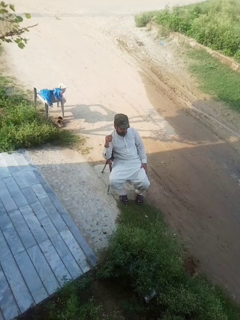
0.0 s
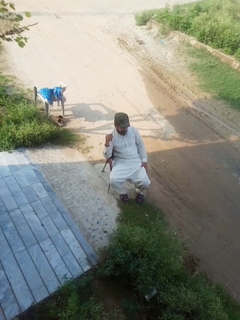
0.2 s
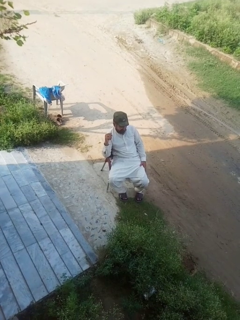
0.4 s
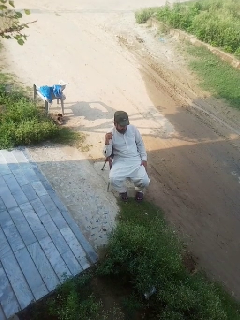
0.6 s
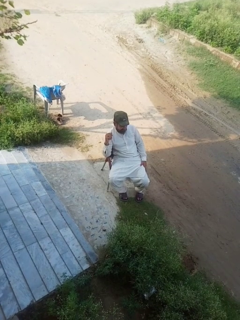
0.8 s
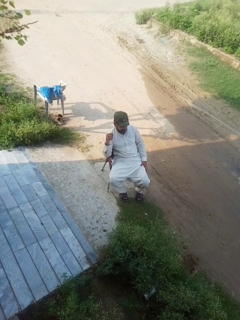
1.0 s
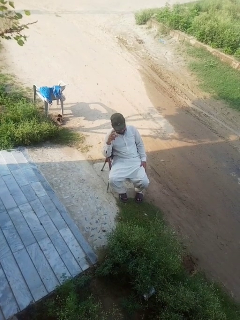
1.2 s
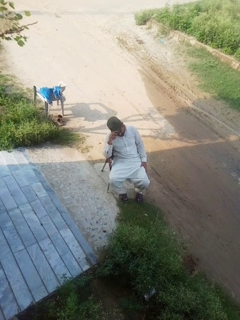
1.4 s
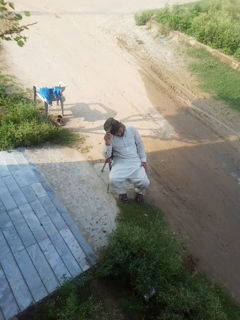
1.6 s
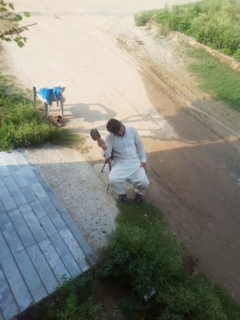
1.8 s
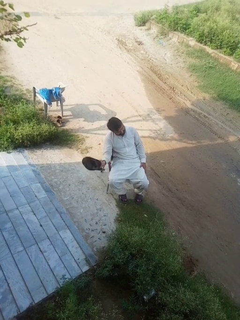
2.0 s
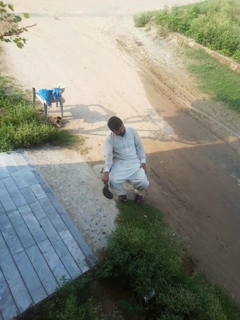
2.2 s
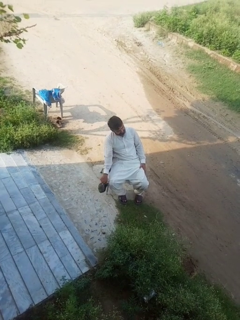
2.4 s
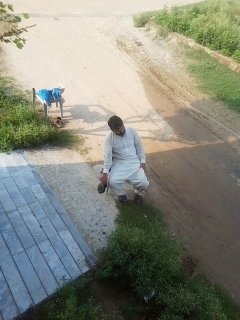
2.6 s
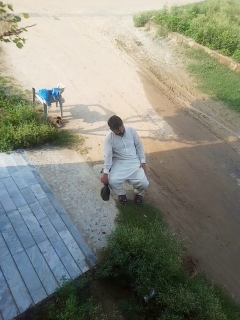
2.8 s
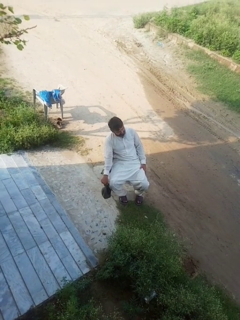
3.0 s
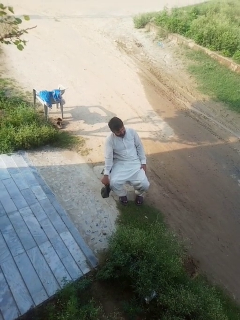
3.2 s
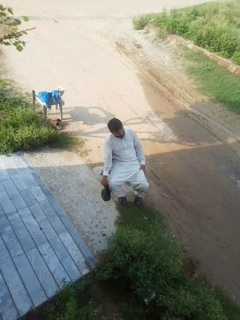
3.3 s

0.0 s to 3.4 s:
person takes off hat

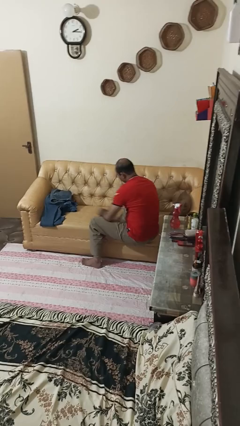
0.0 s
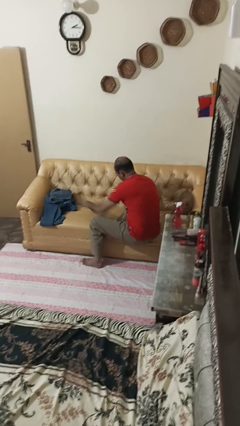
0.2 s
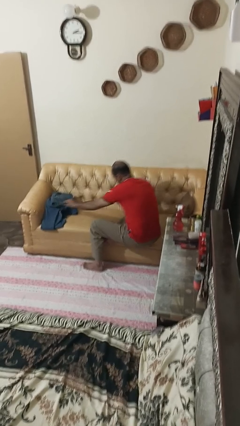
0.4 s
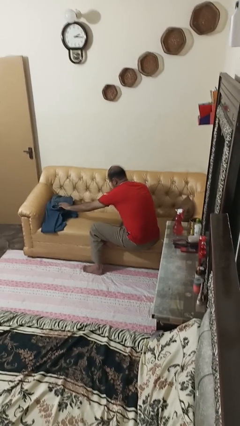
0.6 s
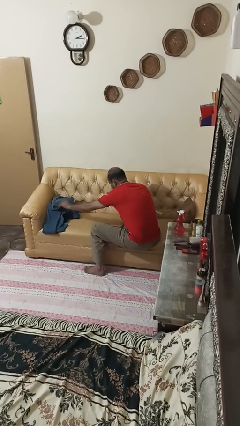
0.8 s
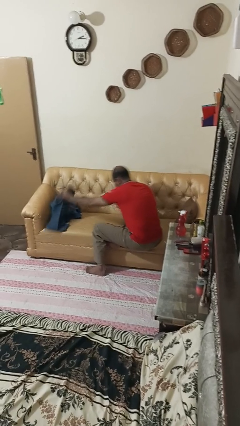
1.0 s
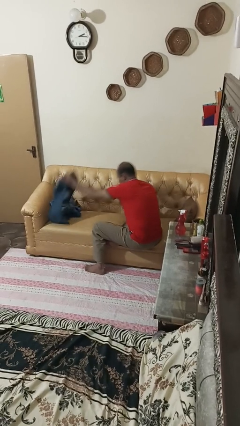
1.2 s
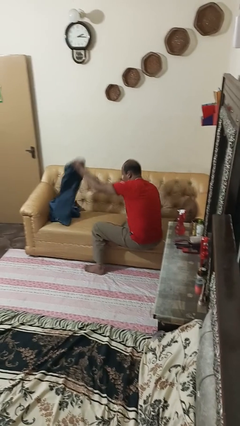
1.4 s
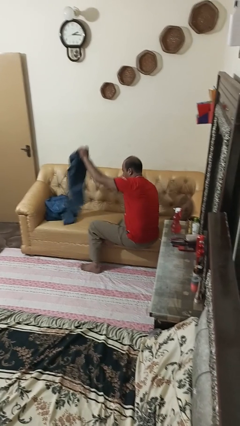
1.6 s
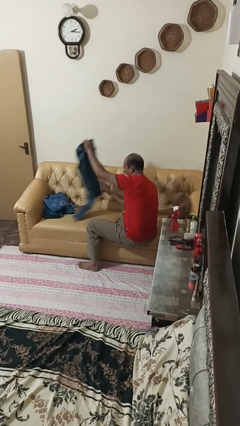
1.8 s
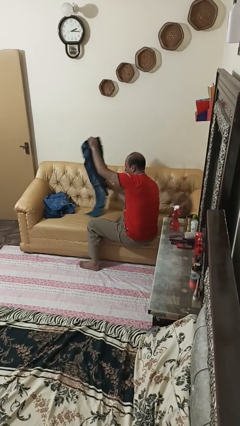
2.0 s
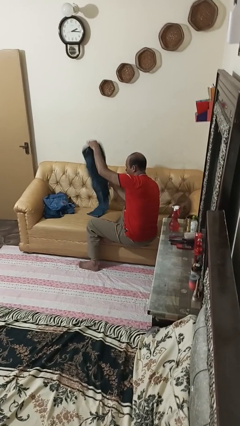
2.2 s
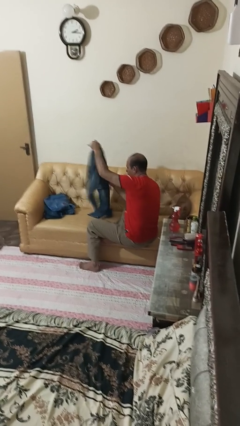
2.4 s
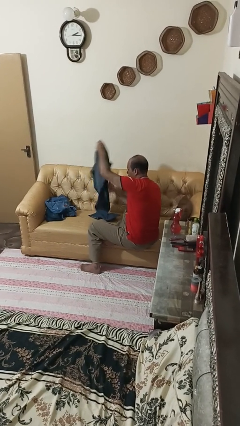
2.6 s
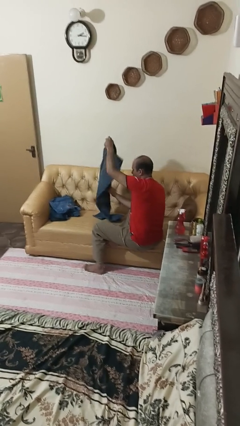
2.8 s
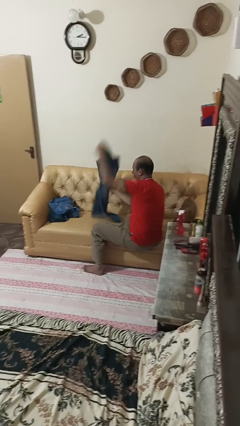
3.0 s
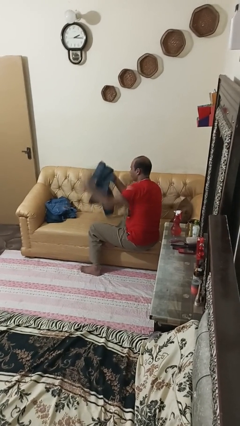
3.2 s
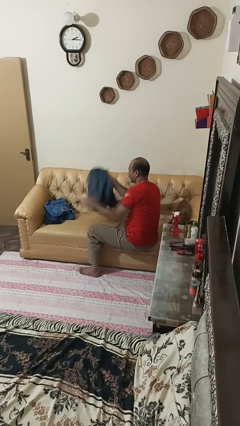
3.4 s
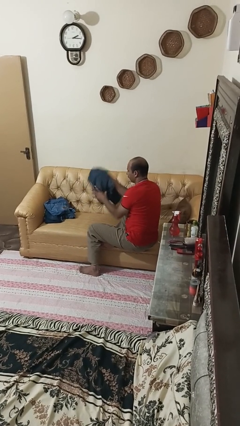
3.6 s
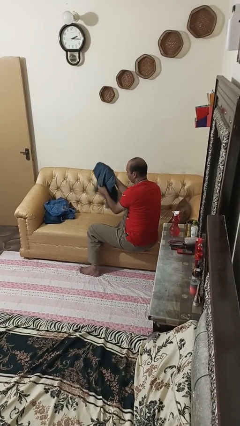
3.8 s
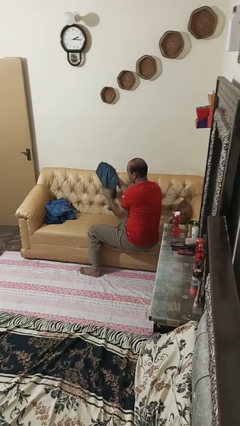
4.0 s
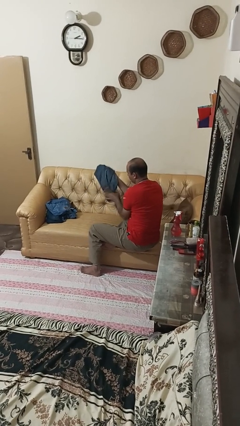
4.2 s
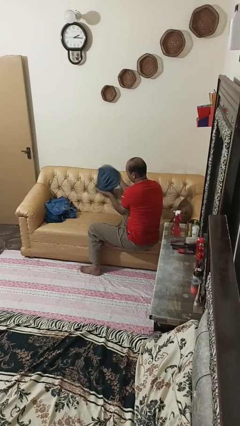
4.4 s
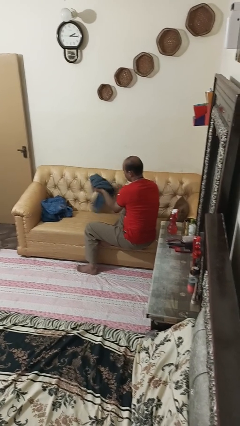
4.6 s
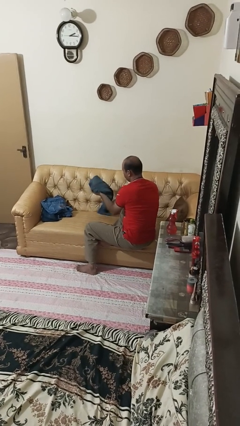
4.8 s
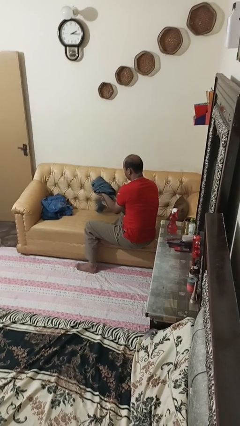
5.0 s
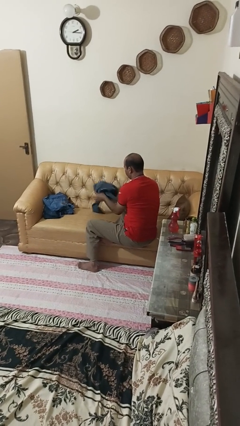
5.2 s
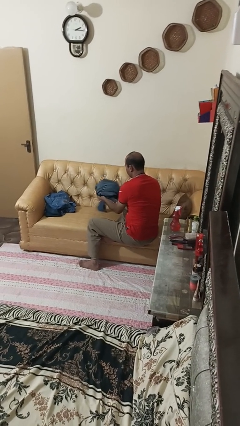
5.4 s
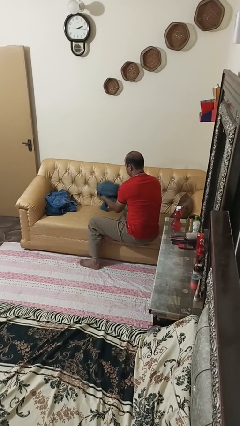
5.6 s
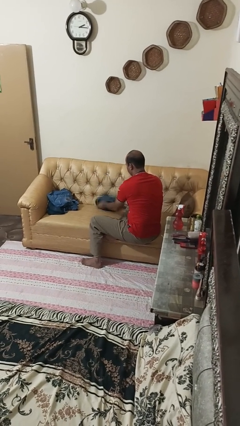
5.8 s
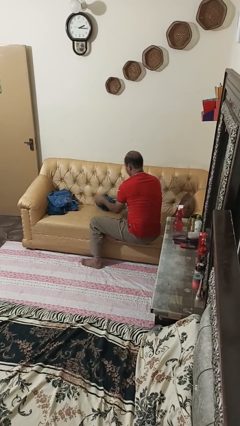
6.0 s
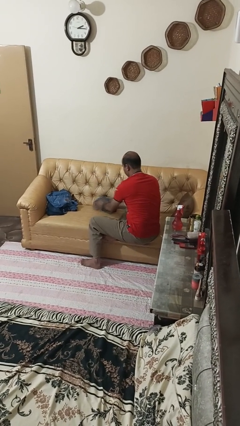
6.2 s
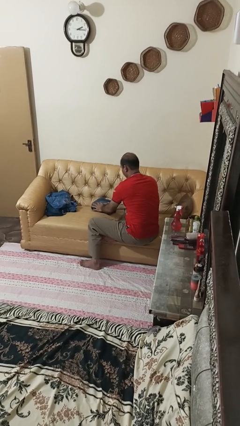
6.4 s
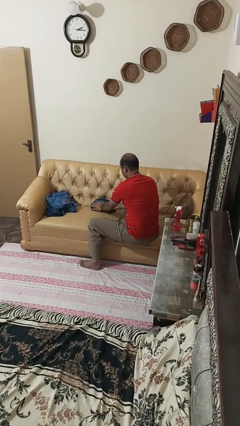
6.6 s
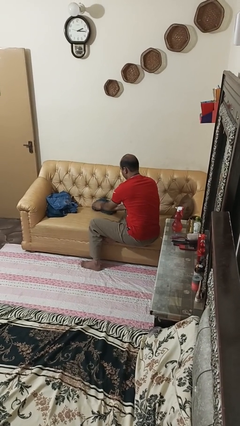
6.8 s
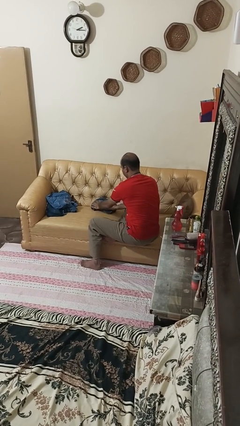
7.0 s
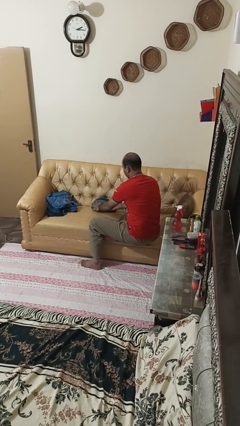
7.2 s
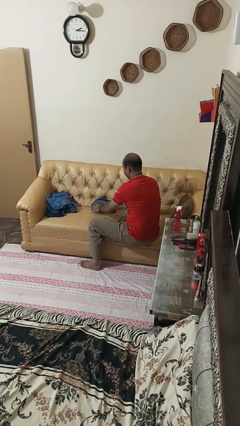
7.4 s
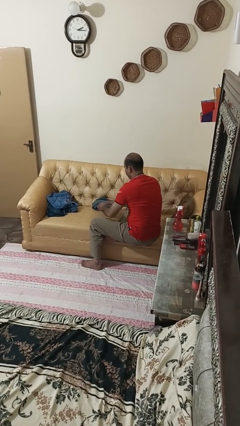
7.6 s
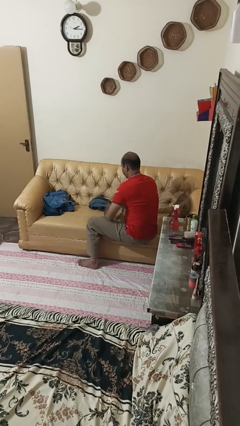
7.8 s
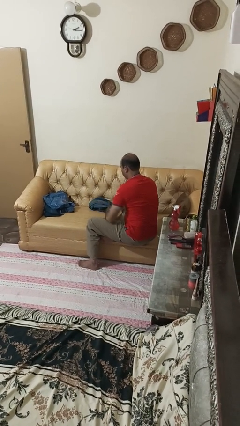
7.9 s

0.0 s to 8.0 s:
person folds pants

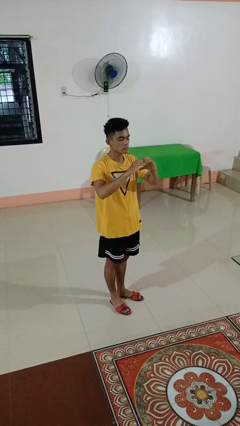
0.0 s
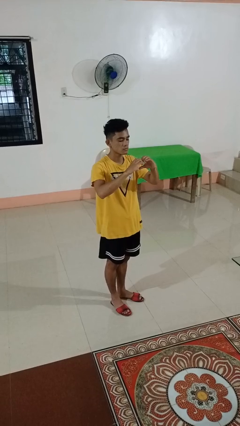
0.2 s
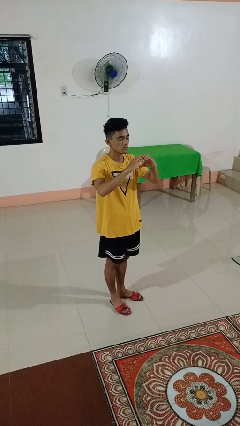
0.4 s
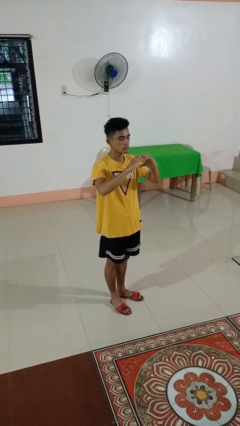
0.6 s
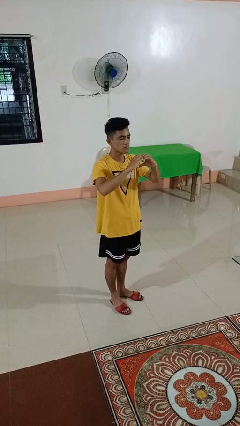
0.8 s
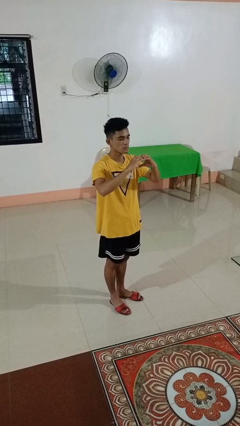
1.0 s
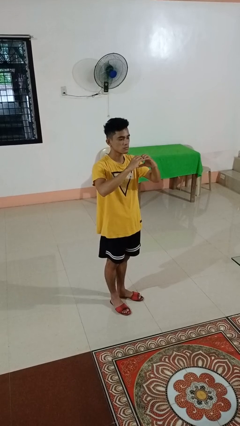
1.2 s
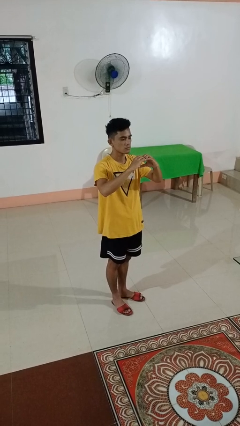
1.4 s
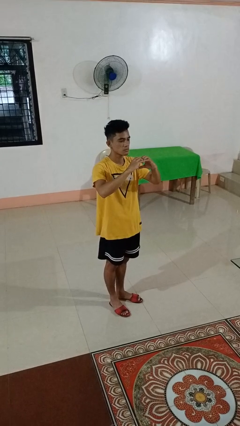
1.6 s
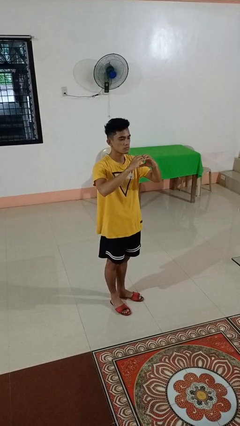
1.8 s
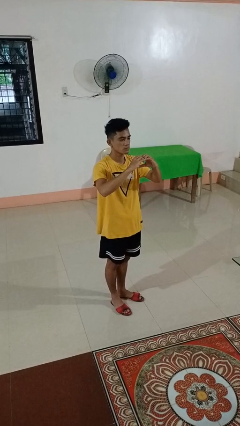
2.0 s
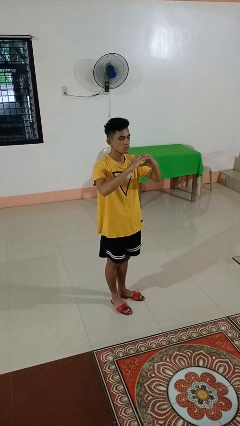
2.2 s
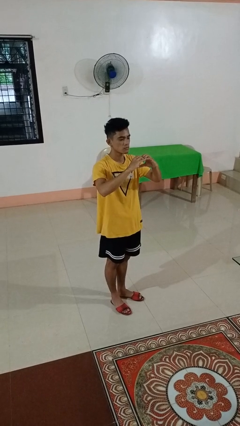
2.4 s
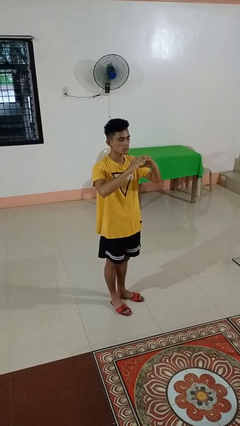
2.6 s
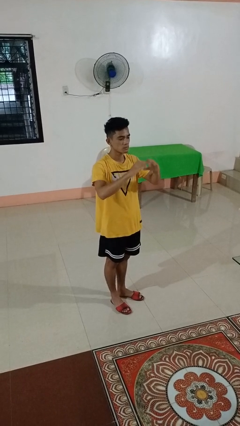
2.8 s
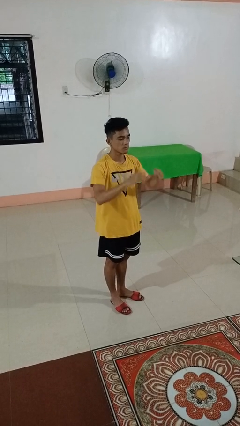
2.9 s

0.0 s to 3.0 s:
person gestures heart

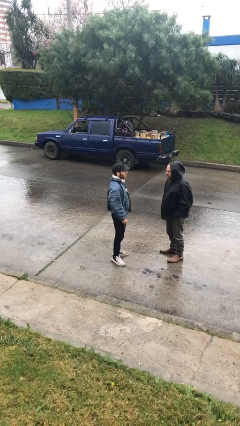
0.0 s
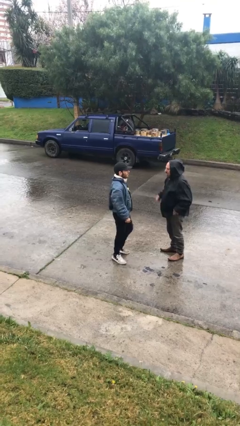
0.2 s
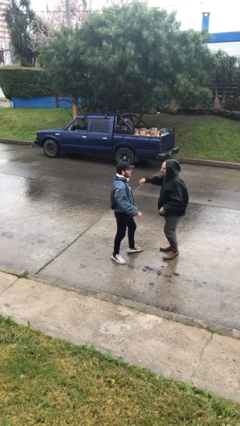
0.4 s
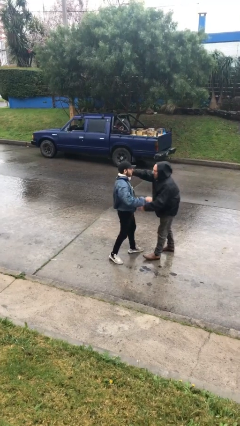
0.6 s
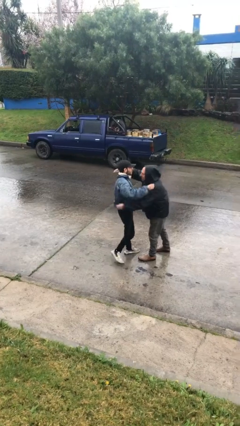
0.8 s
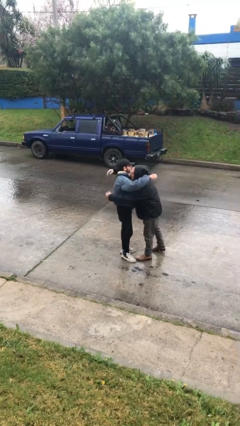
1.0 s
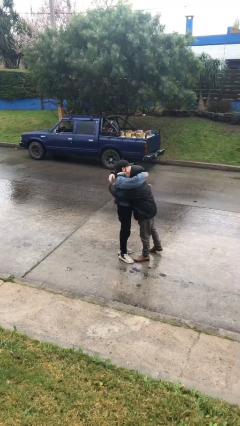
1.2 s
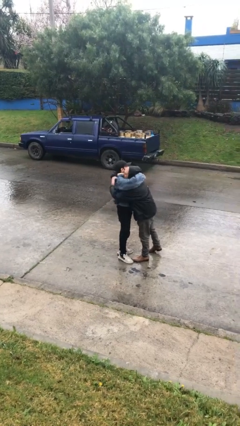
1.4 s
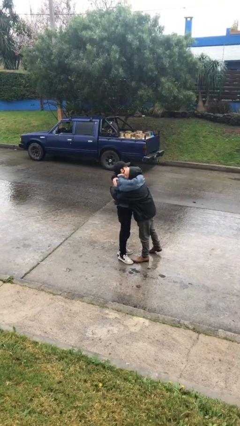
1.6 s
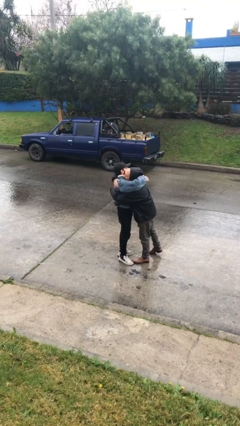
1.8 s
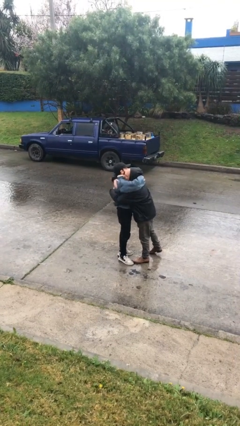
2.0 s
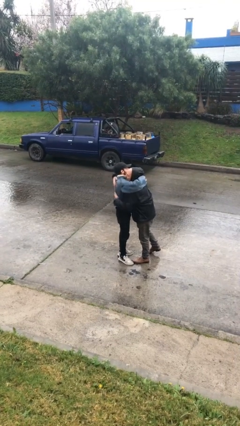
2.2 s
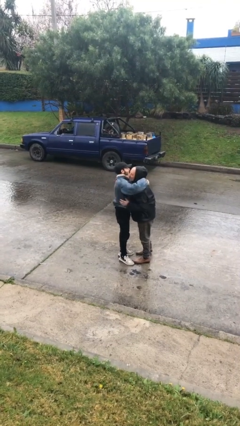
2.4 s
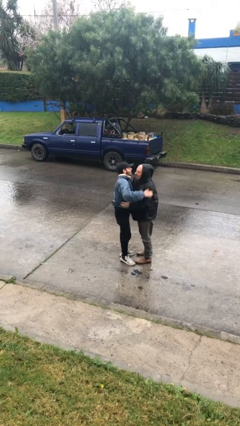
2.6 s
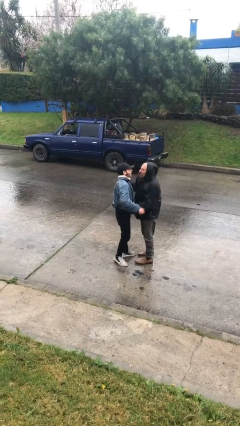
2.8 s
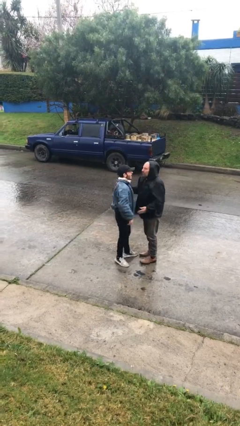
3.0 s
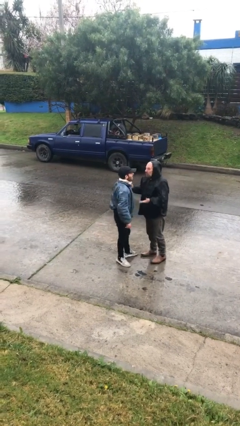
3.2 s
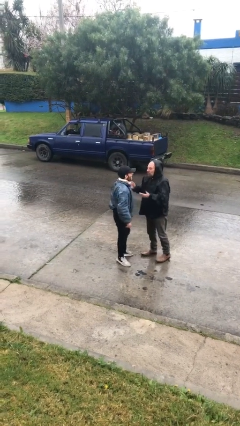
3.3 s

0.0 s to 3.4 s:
person embraces person
